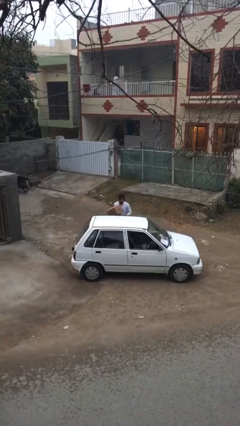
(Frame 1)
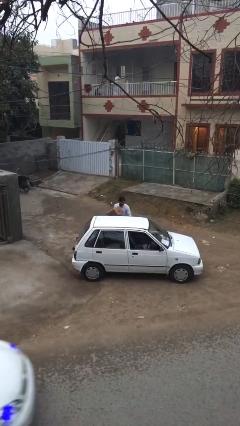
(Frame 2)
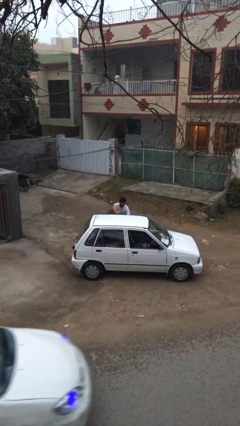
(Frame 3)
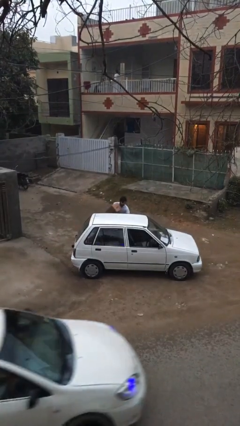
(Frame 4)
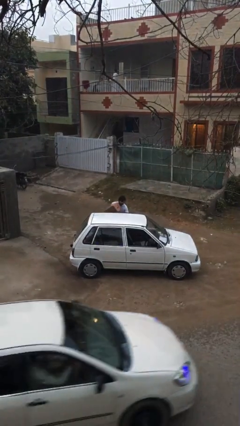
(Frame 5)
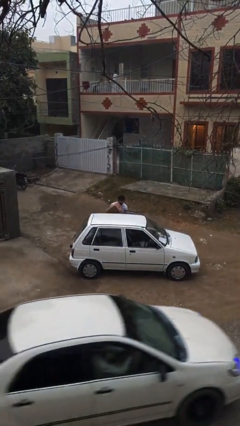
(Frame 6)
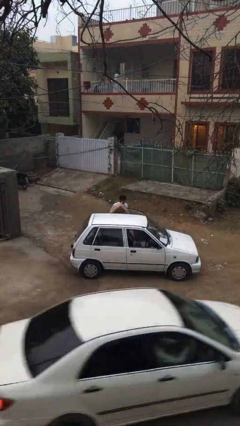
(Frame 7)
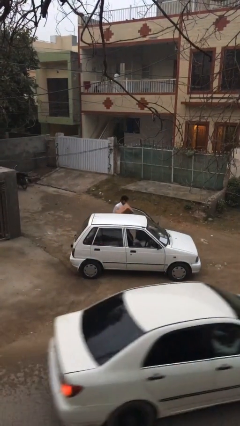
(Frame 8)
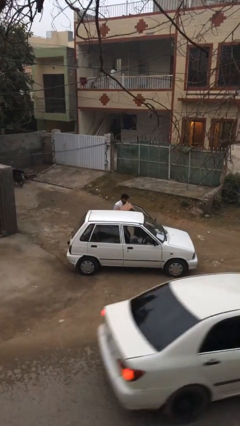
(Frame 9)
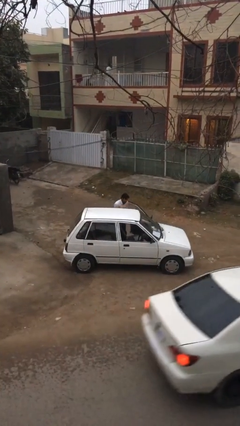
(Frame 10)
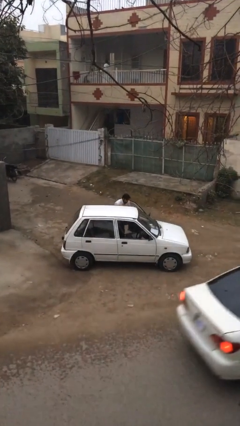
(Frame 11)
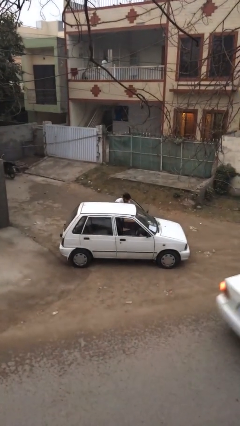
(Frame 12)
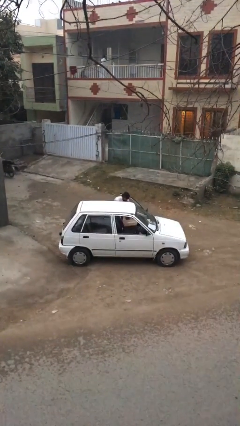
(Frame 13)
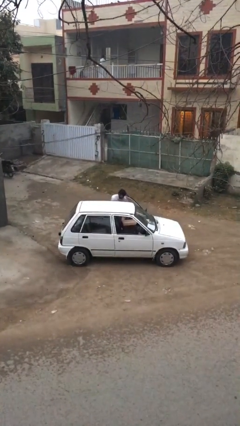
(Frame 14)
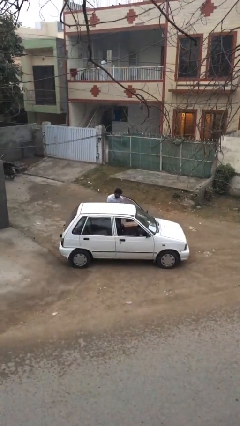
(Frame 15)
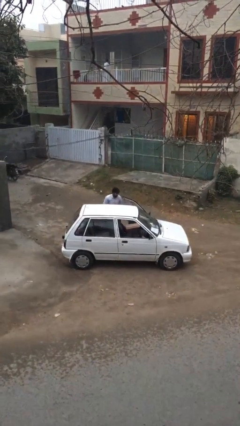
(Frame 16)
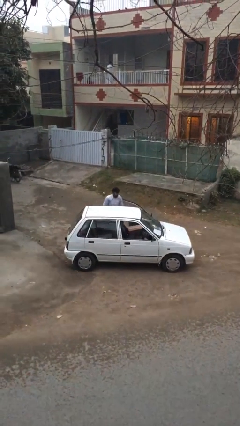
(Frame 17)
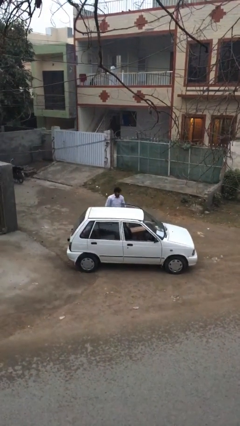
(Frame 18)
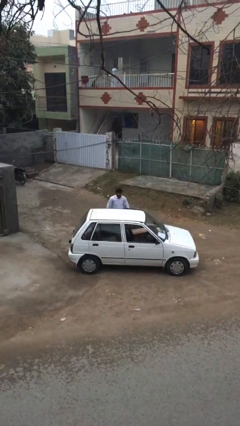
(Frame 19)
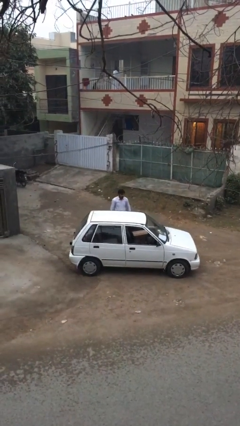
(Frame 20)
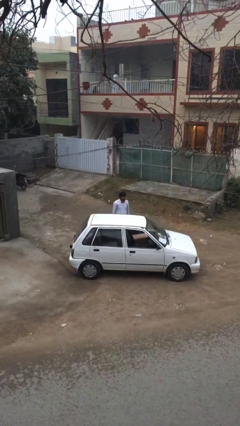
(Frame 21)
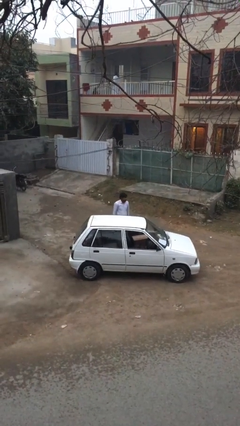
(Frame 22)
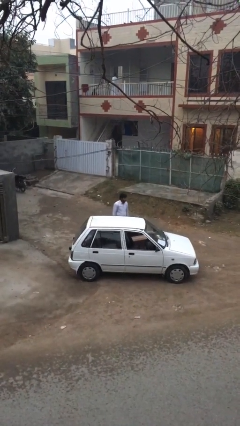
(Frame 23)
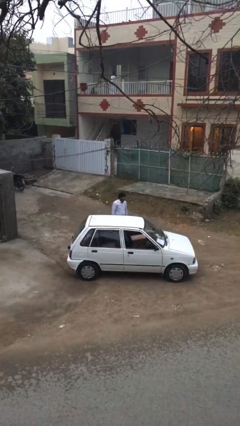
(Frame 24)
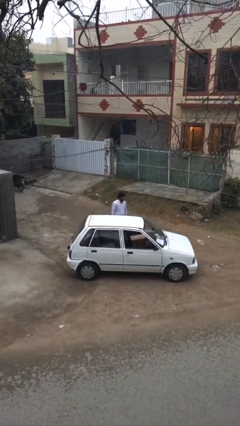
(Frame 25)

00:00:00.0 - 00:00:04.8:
person loads car

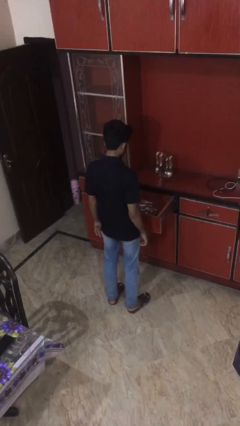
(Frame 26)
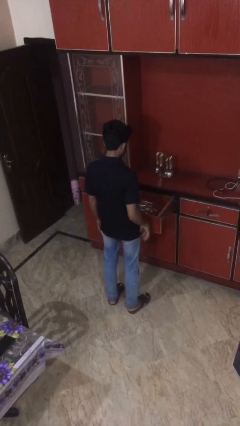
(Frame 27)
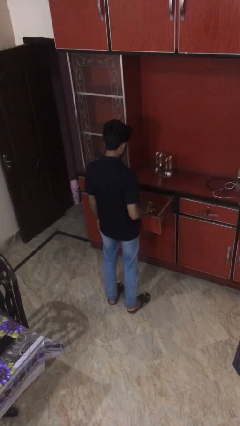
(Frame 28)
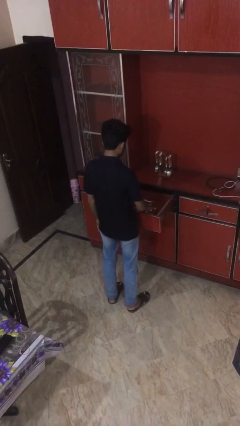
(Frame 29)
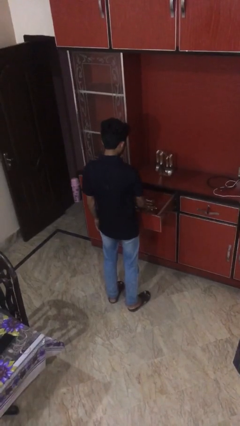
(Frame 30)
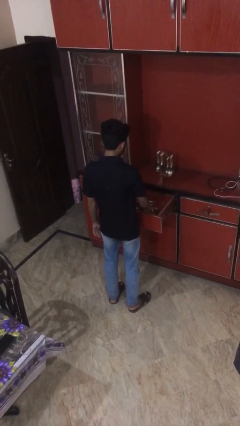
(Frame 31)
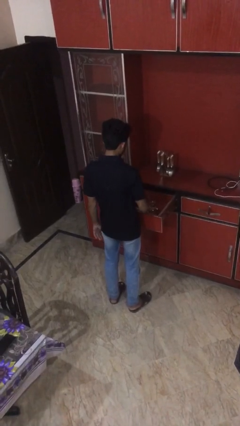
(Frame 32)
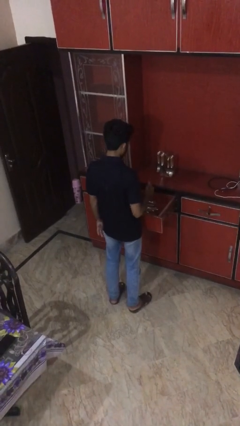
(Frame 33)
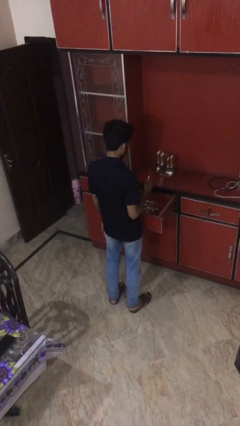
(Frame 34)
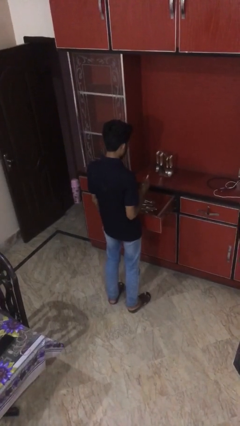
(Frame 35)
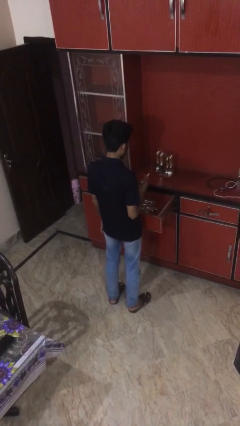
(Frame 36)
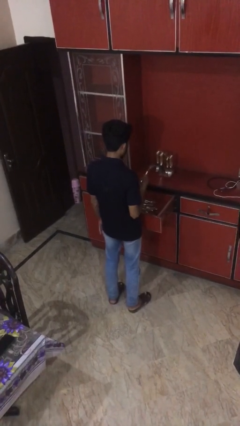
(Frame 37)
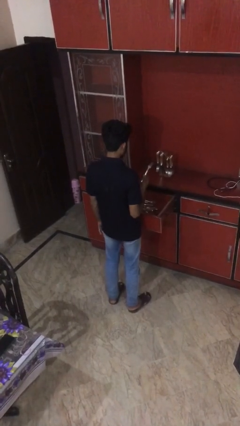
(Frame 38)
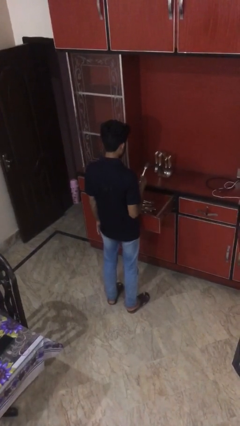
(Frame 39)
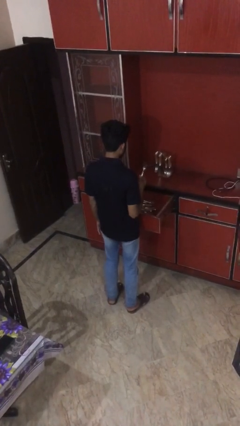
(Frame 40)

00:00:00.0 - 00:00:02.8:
person takes object from kitchen drawer

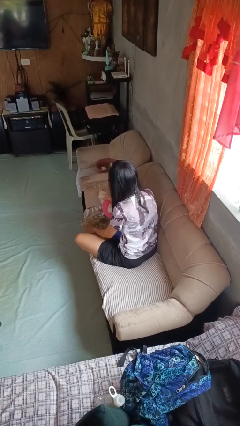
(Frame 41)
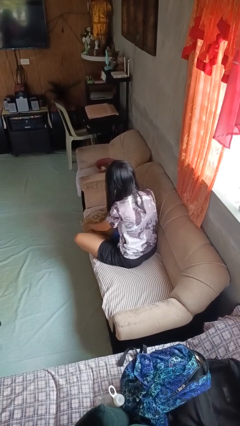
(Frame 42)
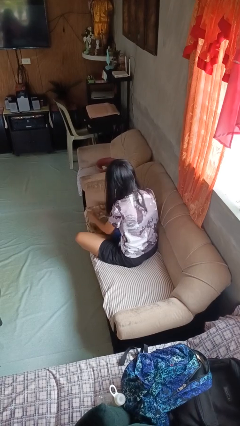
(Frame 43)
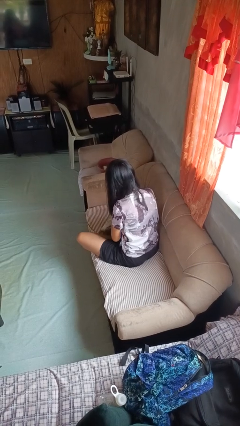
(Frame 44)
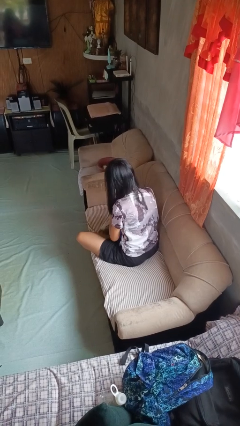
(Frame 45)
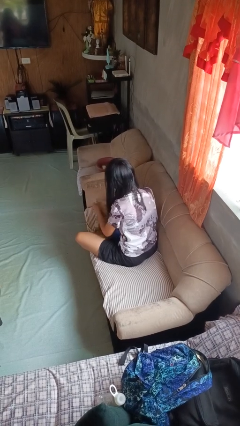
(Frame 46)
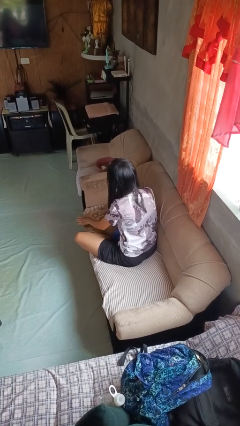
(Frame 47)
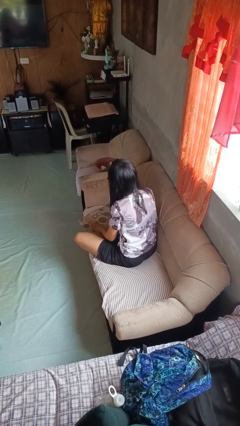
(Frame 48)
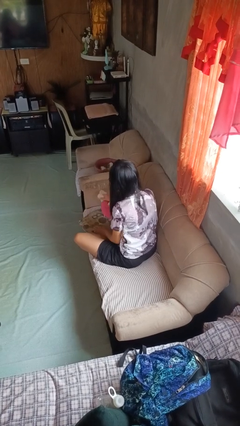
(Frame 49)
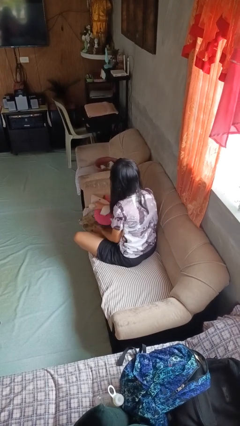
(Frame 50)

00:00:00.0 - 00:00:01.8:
person searches in couch

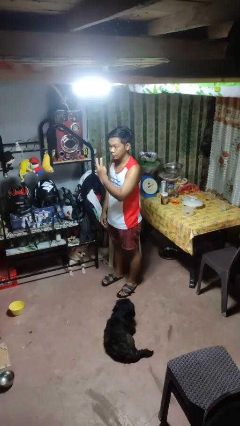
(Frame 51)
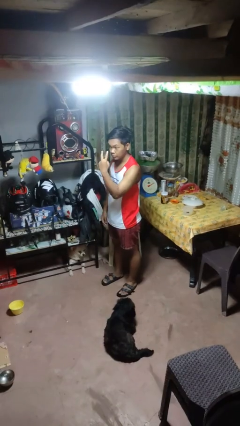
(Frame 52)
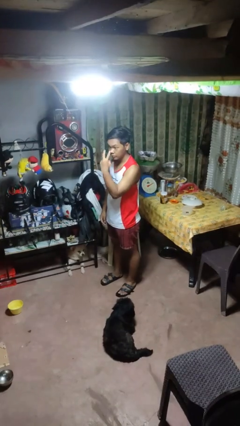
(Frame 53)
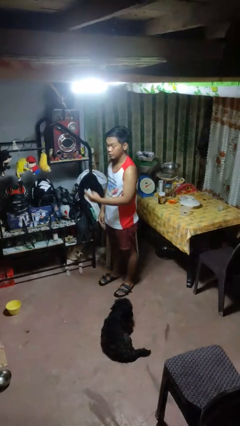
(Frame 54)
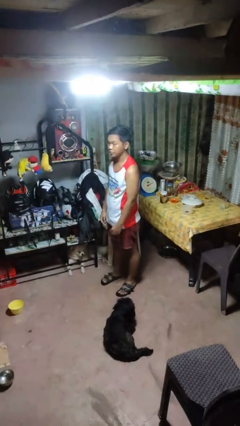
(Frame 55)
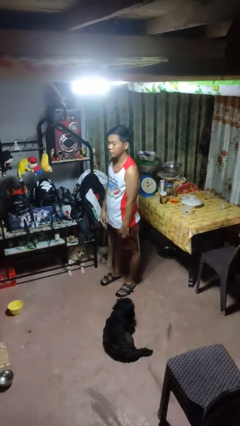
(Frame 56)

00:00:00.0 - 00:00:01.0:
person gestures watch closely

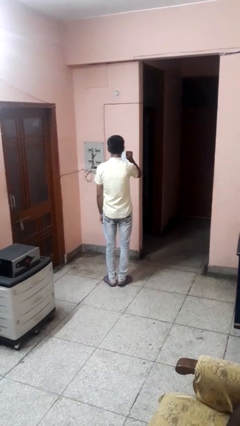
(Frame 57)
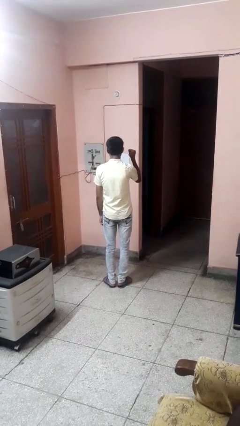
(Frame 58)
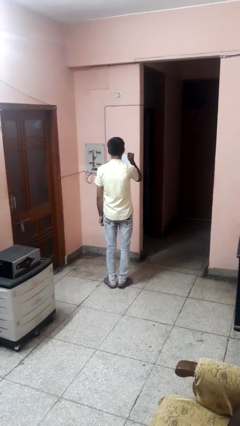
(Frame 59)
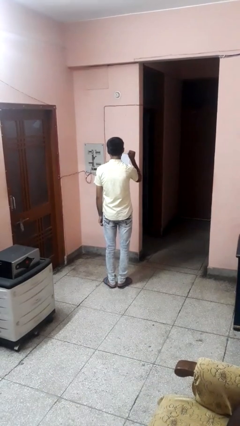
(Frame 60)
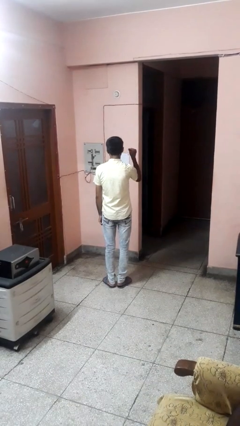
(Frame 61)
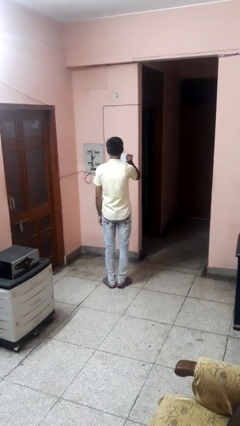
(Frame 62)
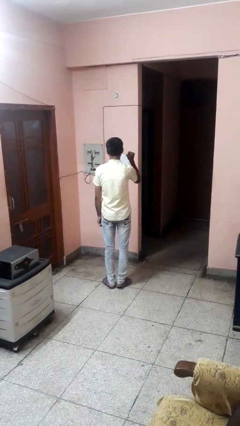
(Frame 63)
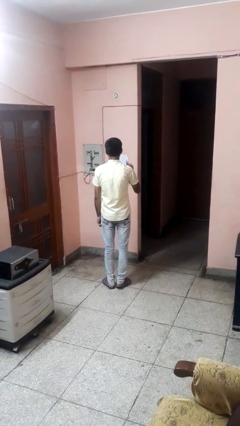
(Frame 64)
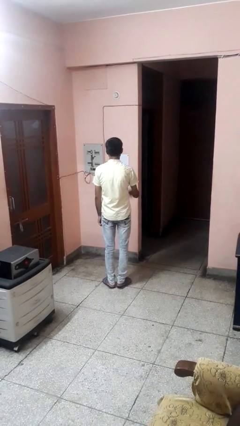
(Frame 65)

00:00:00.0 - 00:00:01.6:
person gestures behind me

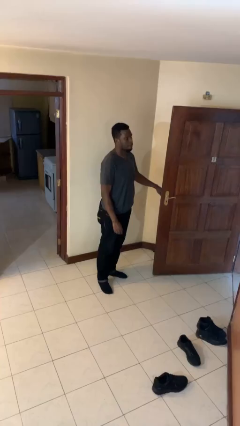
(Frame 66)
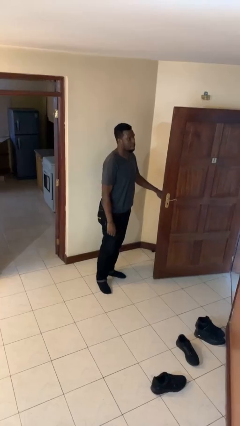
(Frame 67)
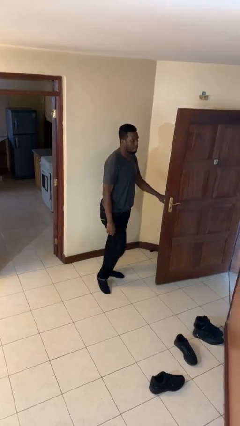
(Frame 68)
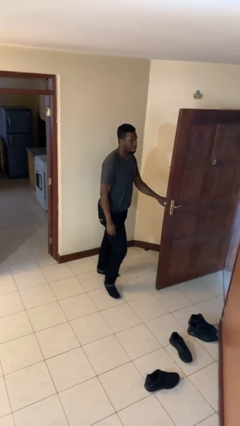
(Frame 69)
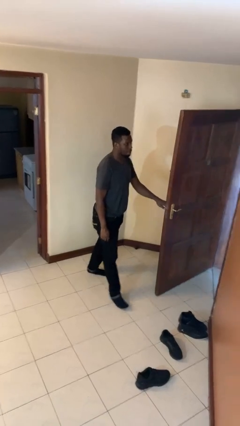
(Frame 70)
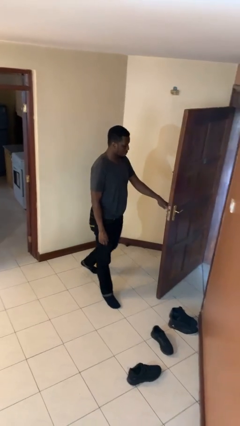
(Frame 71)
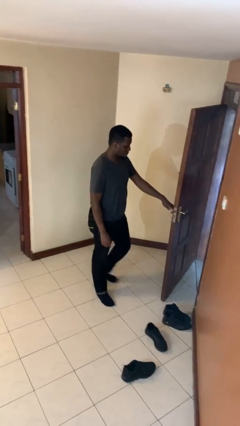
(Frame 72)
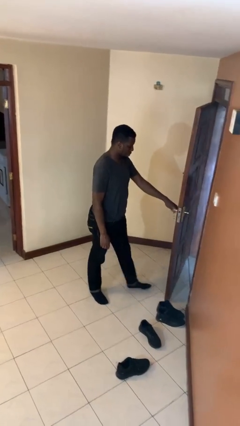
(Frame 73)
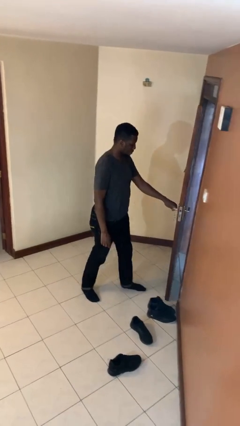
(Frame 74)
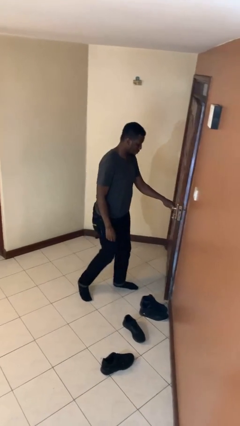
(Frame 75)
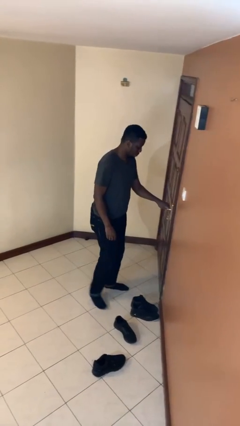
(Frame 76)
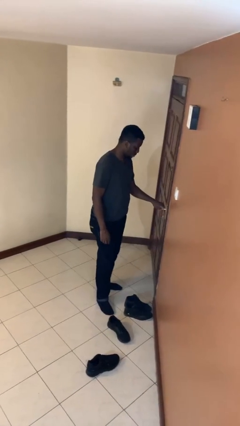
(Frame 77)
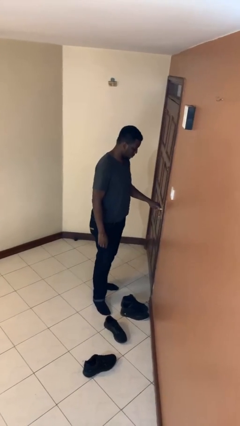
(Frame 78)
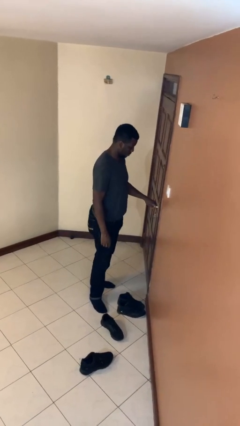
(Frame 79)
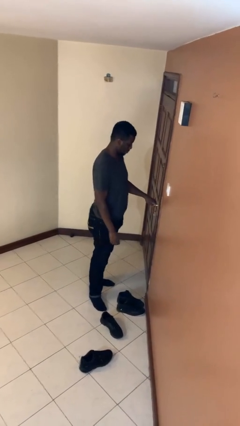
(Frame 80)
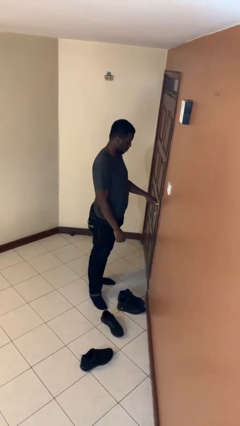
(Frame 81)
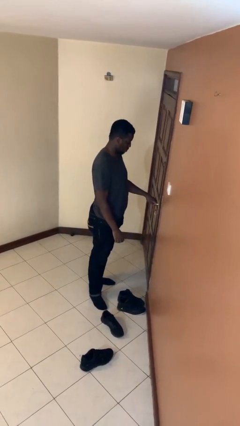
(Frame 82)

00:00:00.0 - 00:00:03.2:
person closes facility door

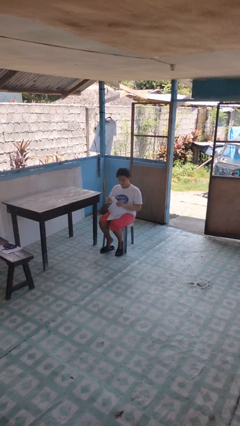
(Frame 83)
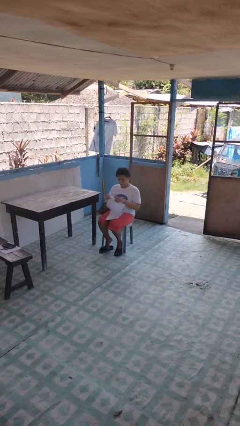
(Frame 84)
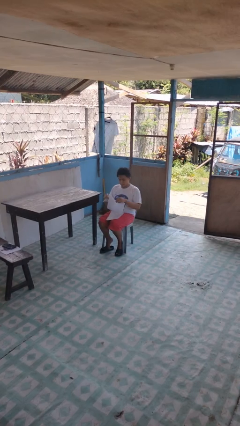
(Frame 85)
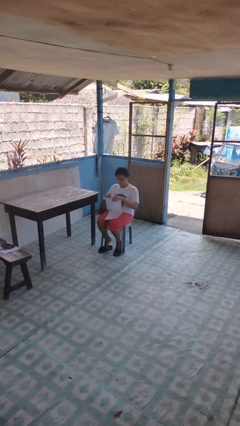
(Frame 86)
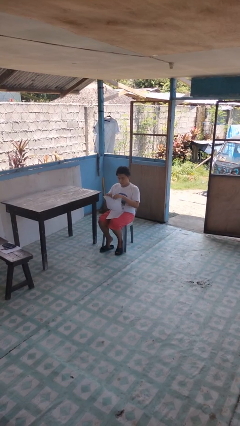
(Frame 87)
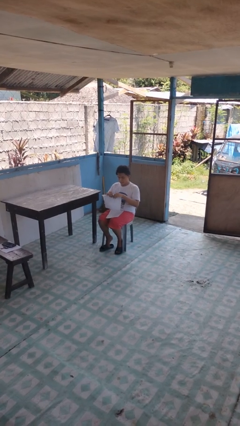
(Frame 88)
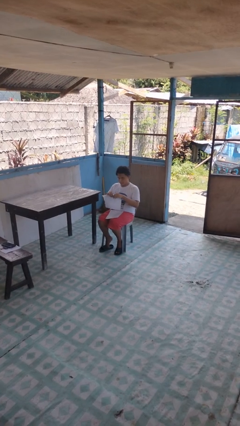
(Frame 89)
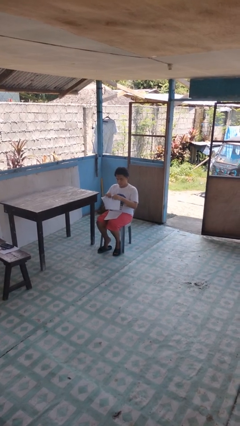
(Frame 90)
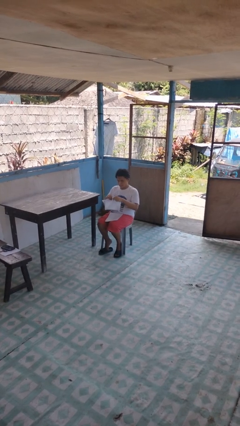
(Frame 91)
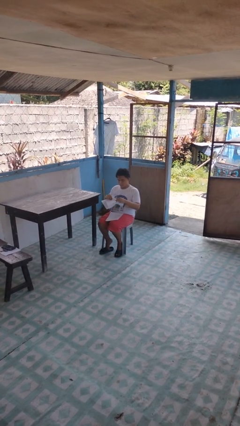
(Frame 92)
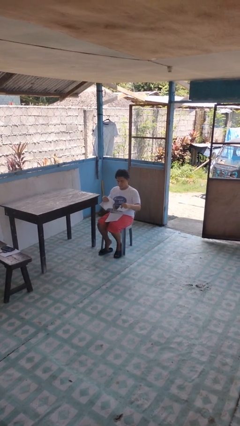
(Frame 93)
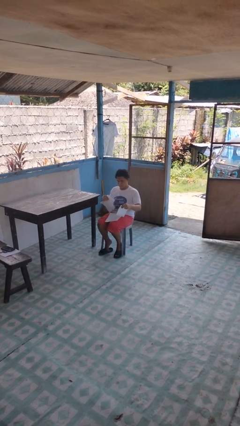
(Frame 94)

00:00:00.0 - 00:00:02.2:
person tears paper
